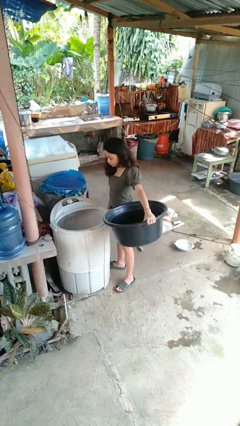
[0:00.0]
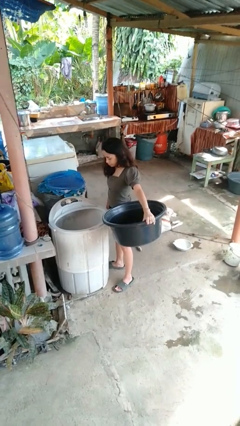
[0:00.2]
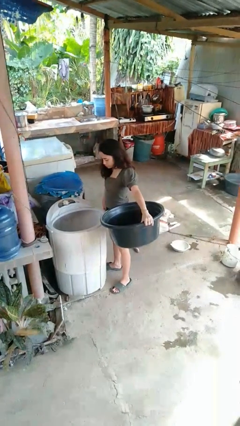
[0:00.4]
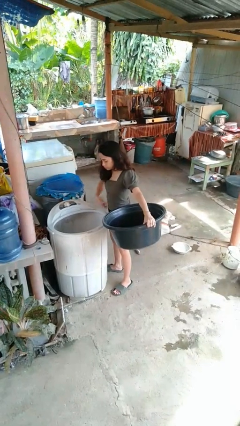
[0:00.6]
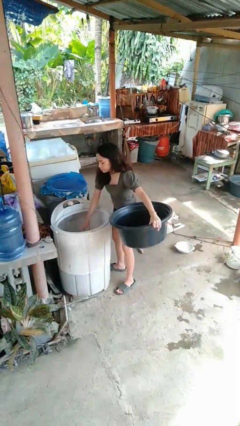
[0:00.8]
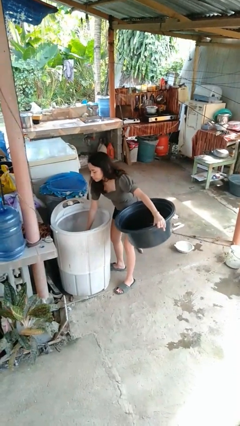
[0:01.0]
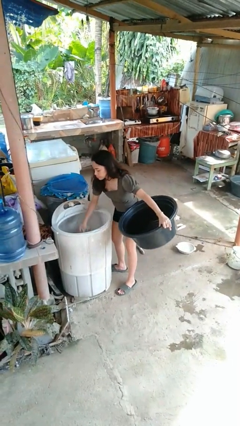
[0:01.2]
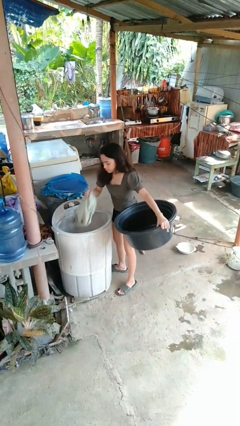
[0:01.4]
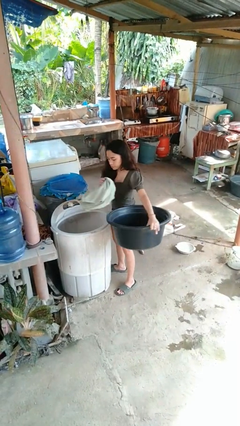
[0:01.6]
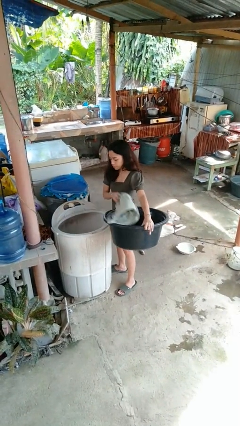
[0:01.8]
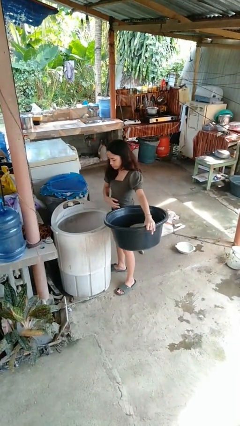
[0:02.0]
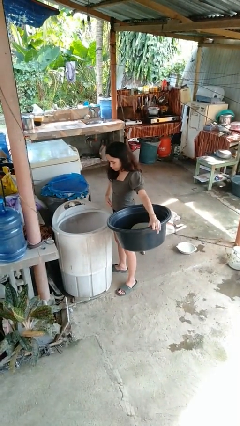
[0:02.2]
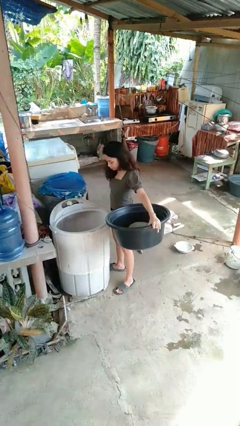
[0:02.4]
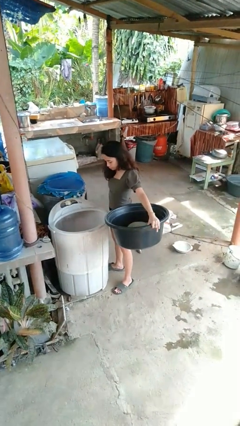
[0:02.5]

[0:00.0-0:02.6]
person unloads clotheswasher

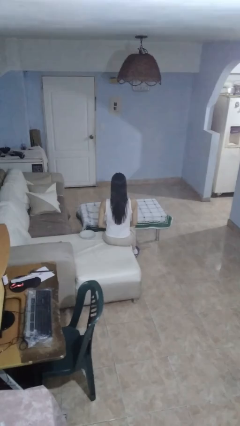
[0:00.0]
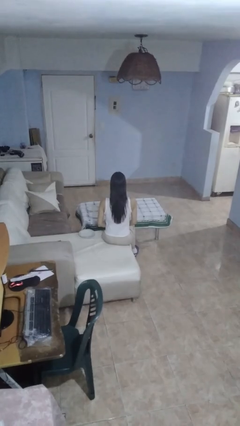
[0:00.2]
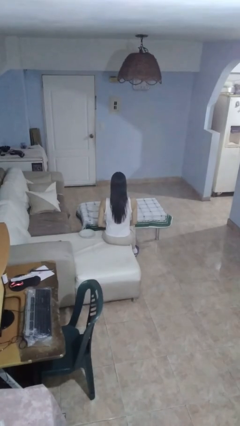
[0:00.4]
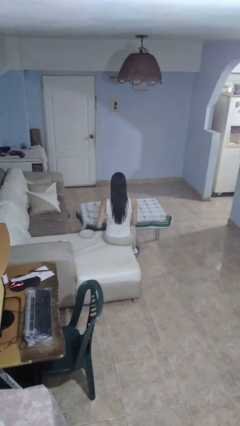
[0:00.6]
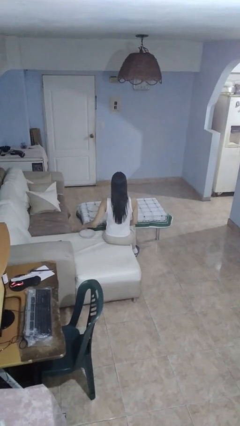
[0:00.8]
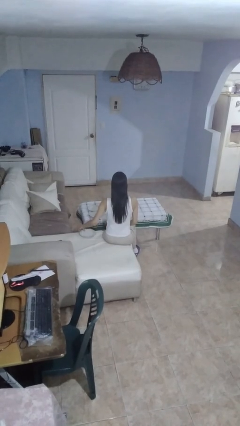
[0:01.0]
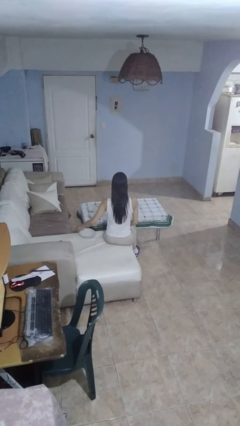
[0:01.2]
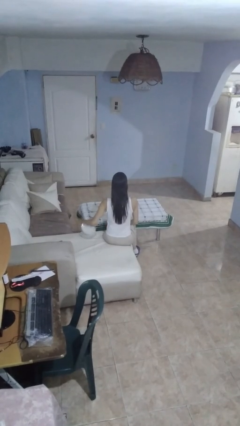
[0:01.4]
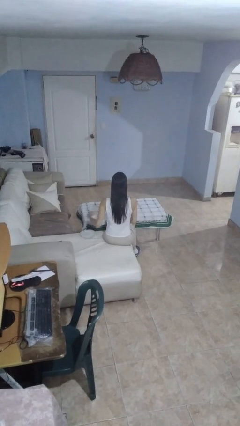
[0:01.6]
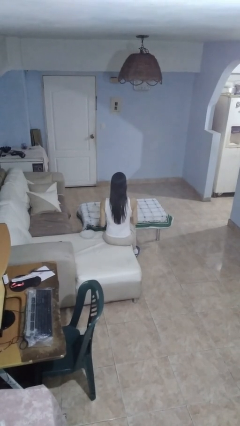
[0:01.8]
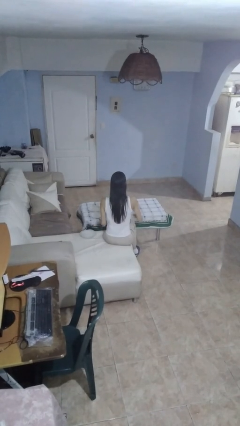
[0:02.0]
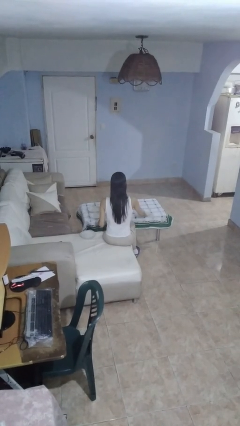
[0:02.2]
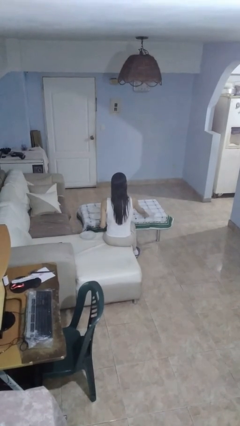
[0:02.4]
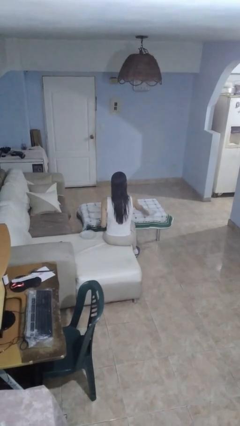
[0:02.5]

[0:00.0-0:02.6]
person sets table

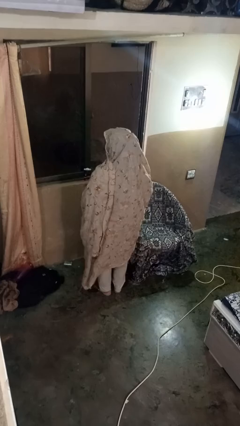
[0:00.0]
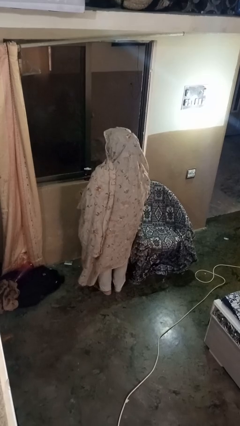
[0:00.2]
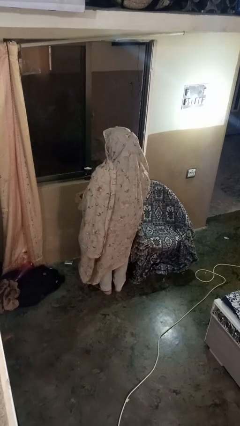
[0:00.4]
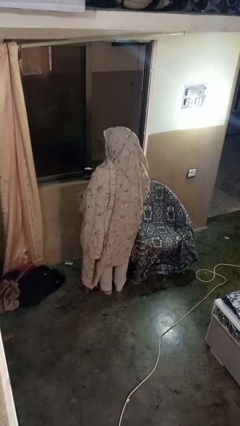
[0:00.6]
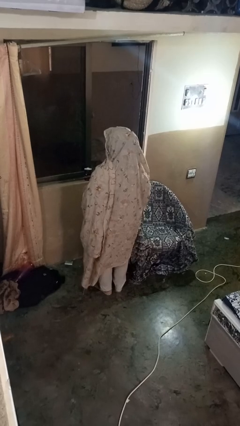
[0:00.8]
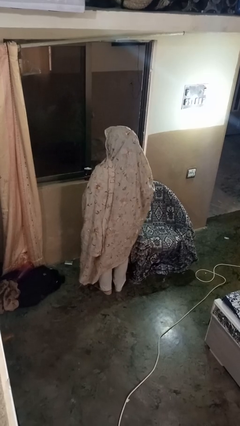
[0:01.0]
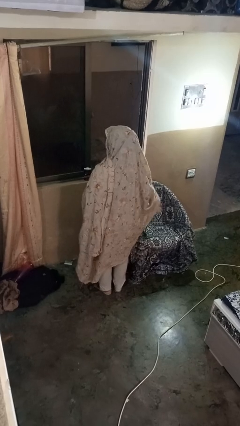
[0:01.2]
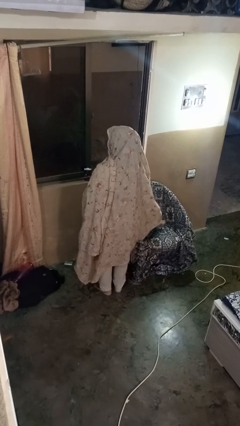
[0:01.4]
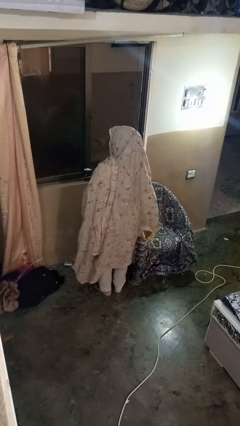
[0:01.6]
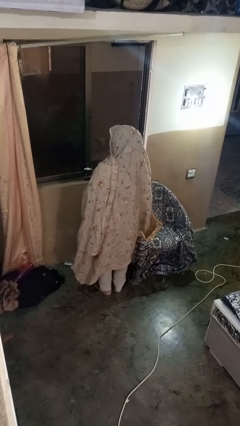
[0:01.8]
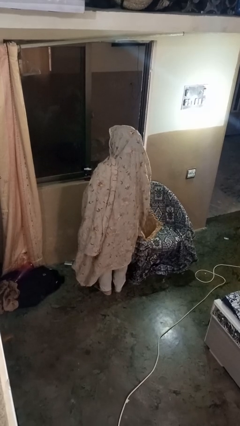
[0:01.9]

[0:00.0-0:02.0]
person puts down object on couch

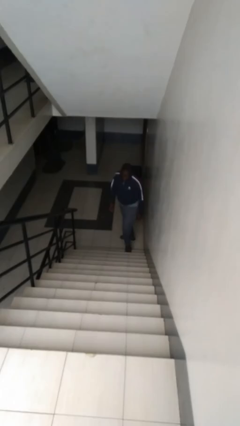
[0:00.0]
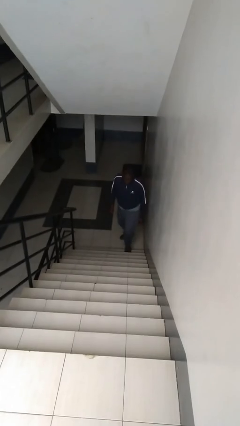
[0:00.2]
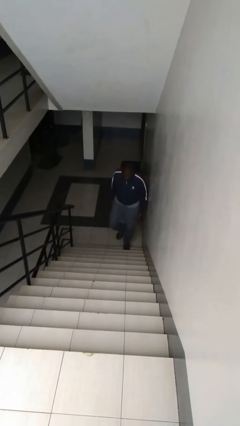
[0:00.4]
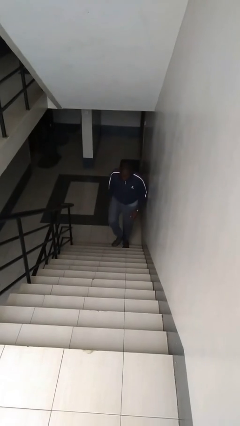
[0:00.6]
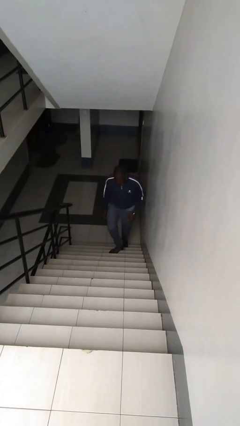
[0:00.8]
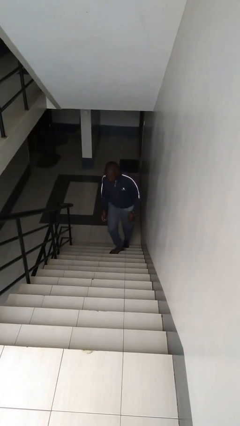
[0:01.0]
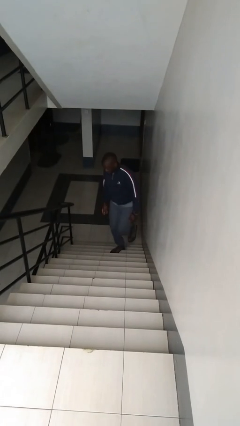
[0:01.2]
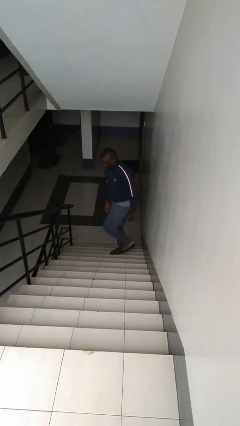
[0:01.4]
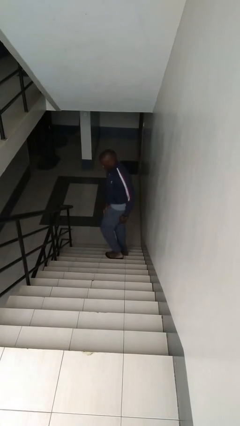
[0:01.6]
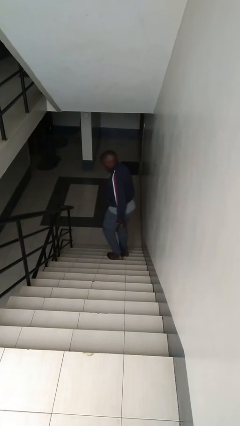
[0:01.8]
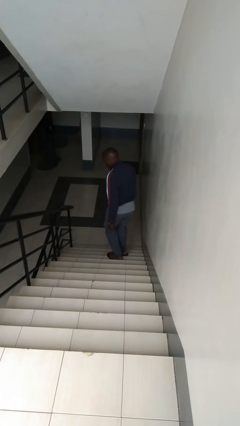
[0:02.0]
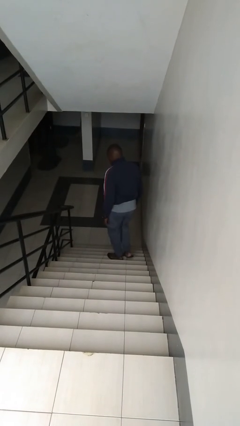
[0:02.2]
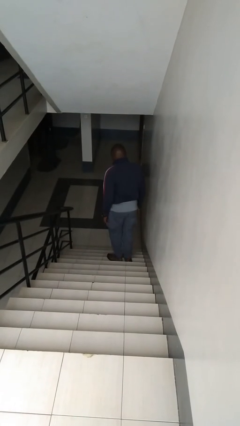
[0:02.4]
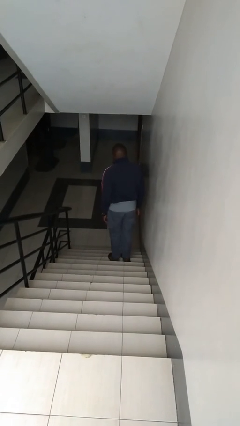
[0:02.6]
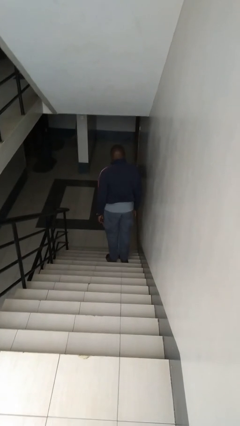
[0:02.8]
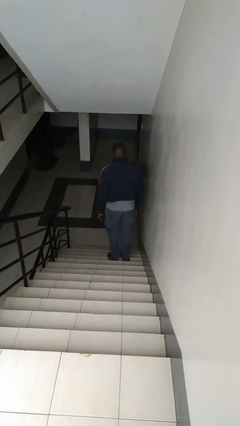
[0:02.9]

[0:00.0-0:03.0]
person climbs up stairs

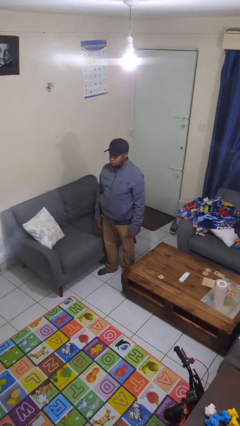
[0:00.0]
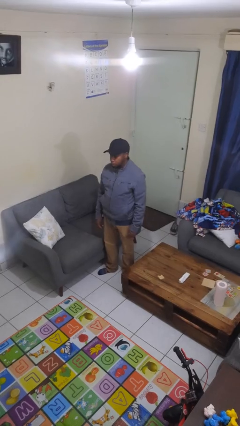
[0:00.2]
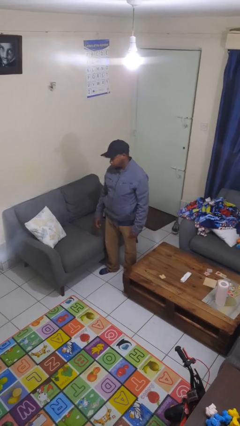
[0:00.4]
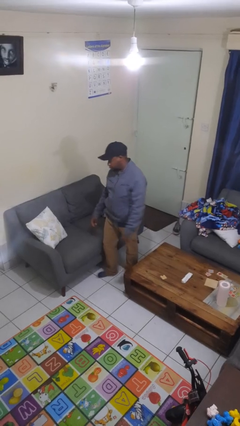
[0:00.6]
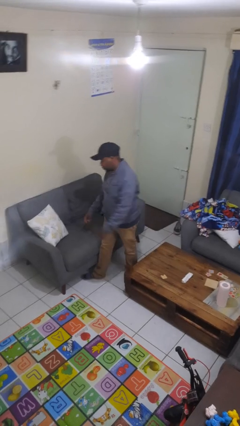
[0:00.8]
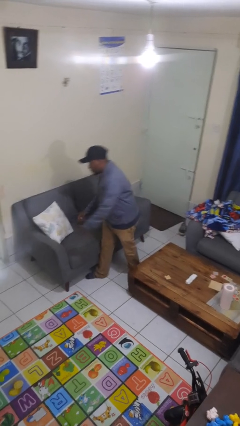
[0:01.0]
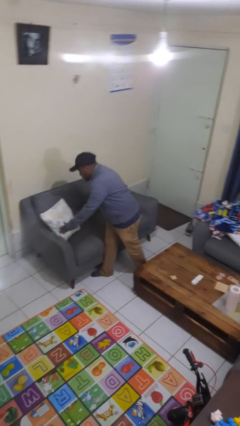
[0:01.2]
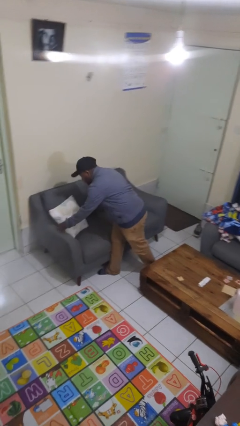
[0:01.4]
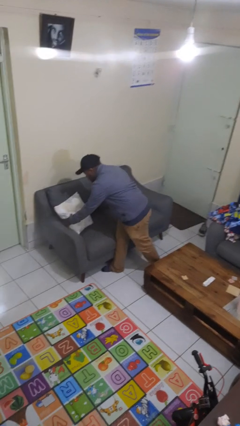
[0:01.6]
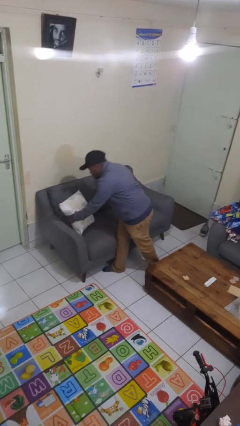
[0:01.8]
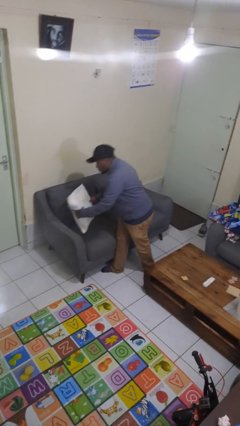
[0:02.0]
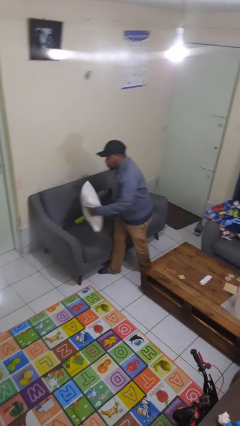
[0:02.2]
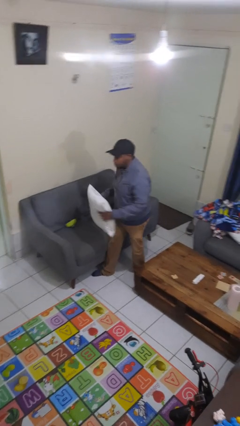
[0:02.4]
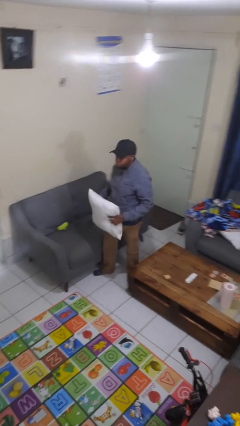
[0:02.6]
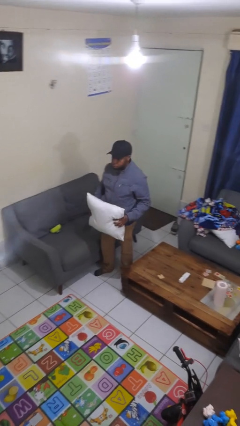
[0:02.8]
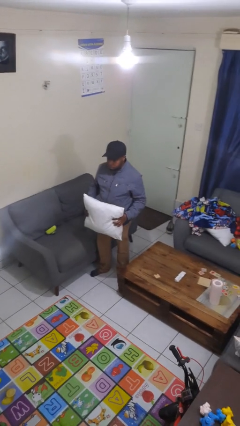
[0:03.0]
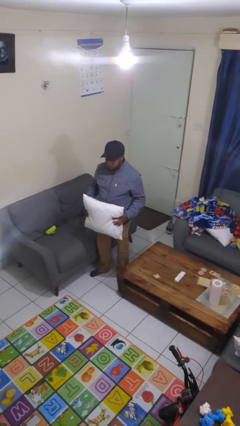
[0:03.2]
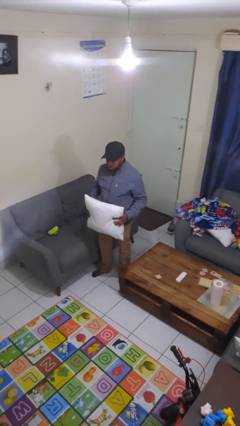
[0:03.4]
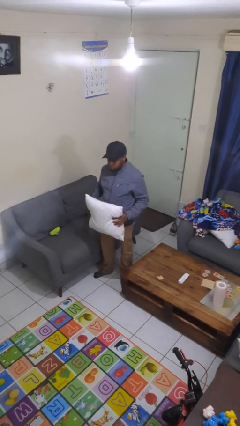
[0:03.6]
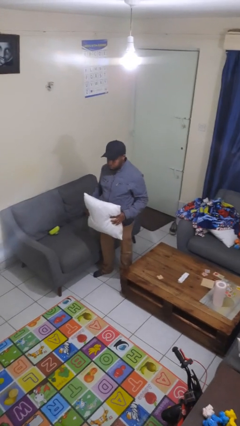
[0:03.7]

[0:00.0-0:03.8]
person picks up object from couch

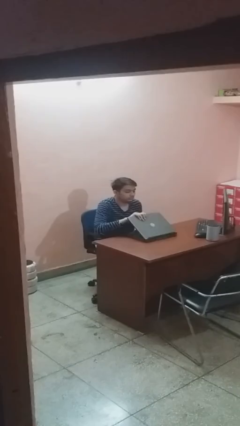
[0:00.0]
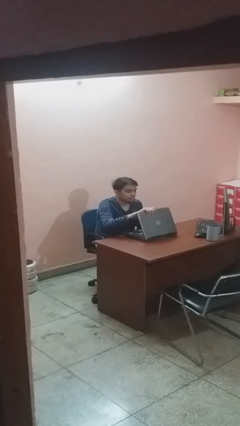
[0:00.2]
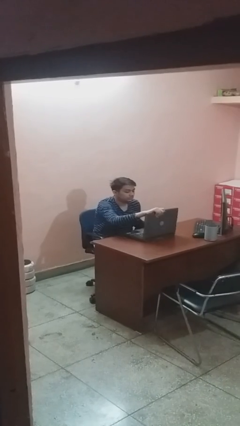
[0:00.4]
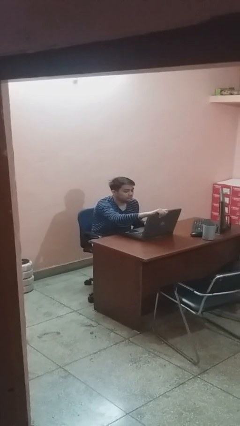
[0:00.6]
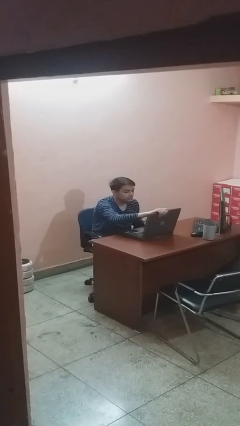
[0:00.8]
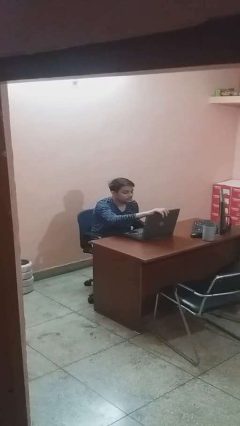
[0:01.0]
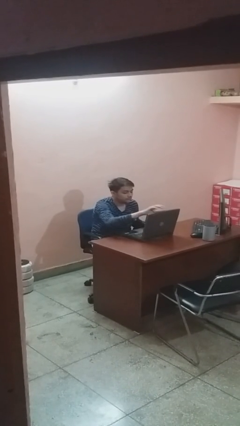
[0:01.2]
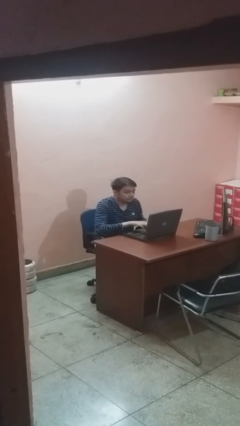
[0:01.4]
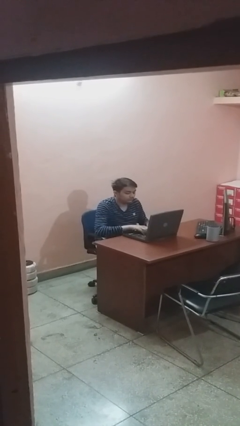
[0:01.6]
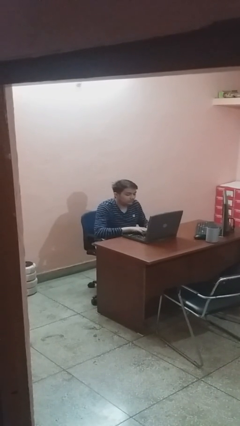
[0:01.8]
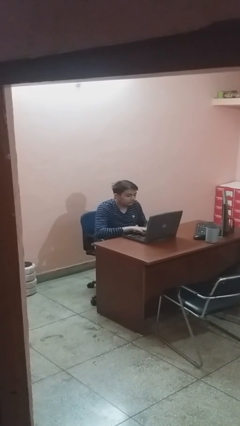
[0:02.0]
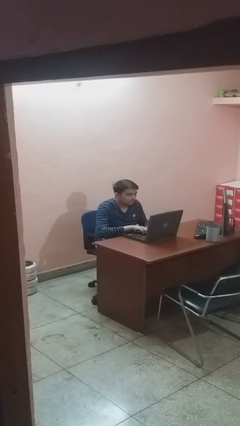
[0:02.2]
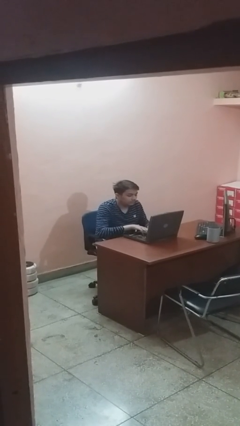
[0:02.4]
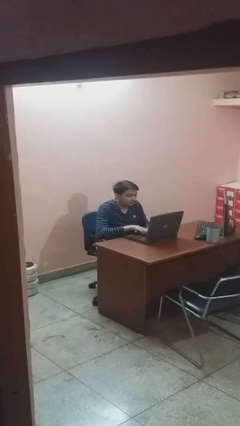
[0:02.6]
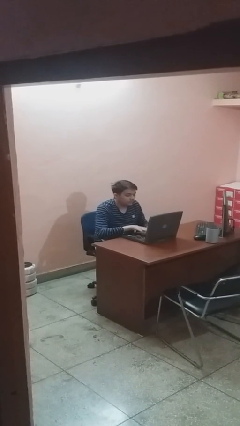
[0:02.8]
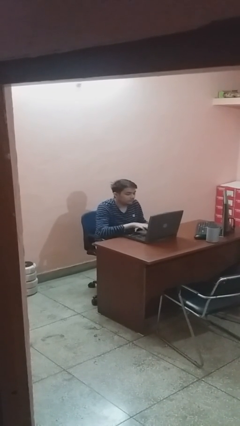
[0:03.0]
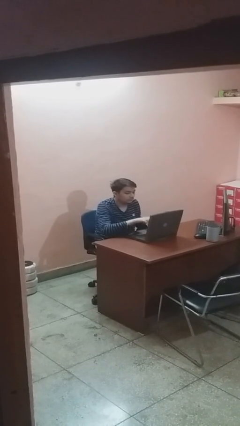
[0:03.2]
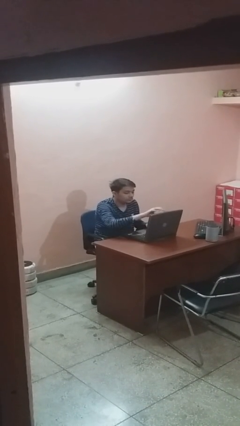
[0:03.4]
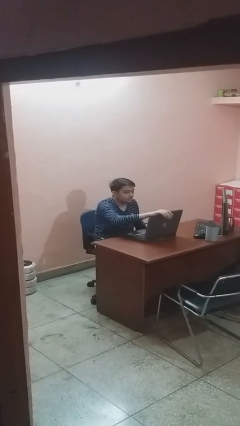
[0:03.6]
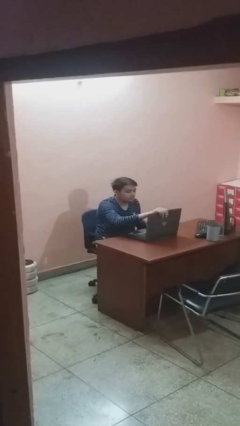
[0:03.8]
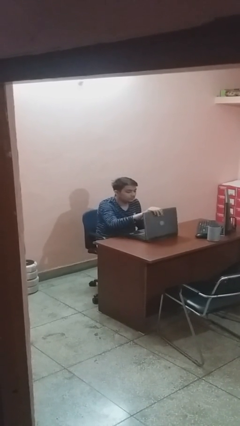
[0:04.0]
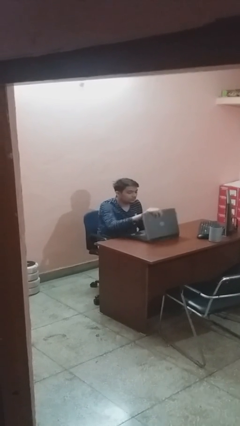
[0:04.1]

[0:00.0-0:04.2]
person interacts with laptop
